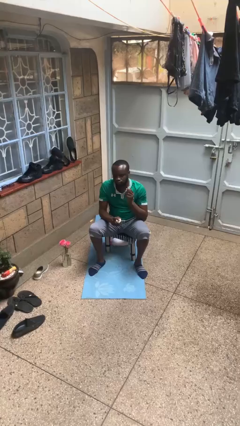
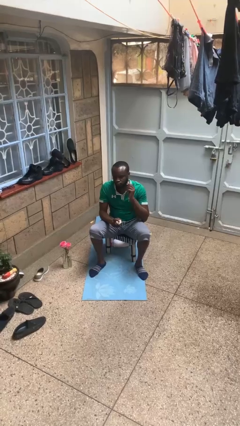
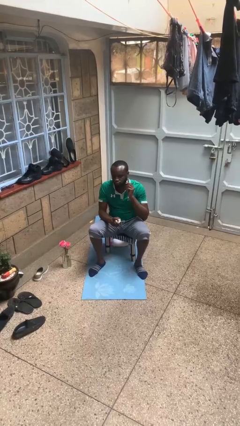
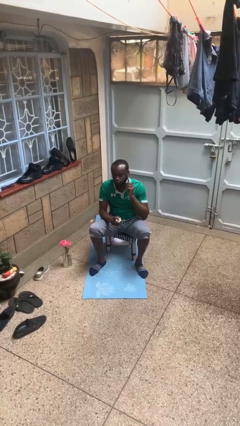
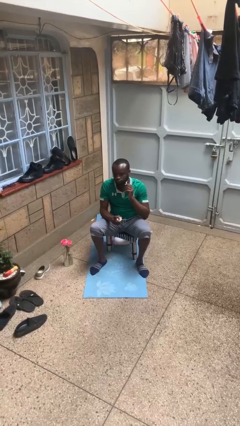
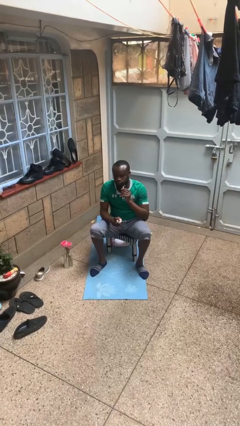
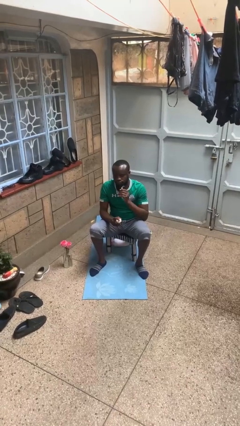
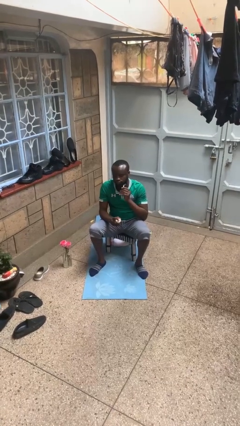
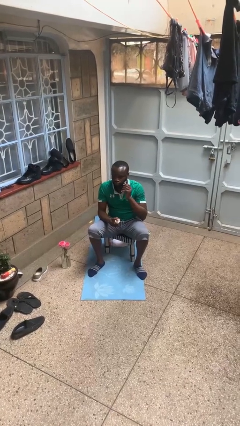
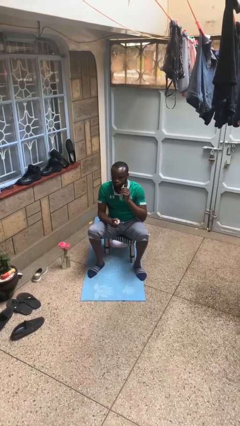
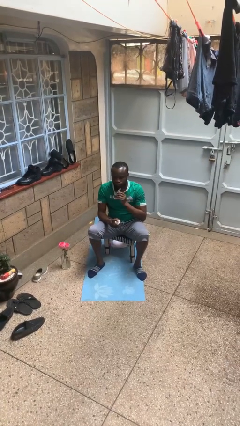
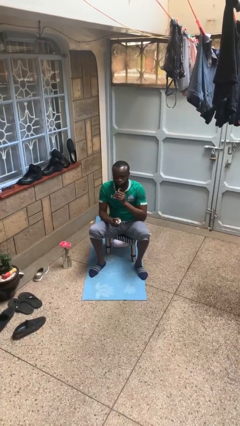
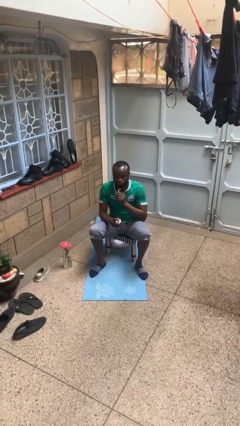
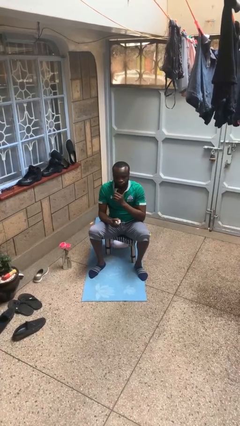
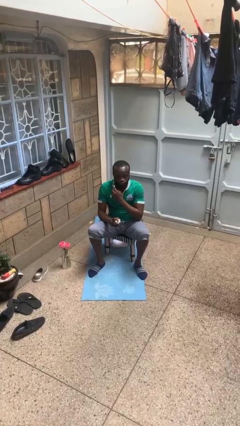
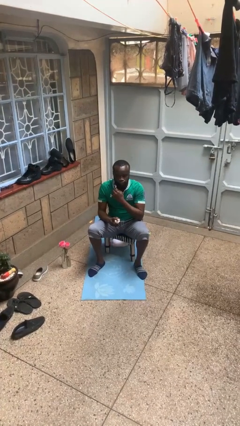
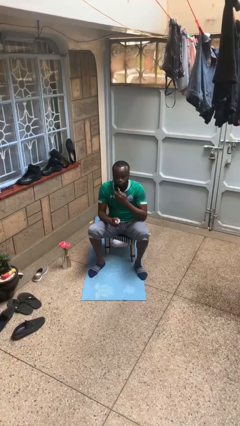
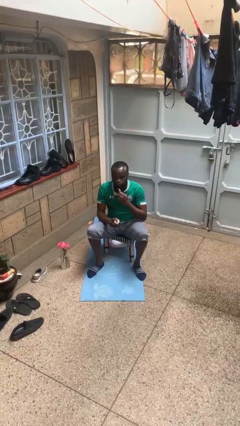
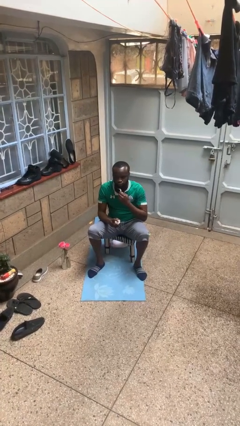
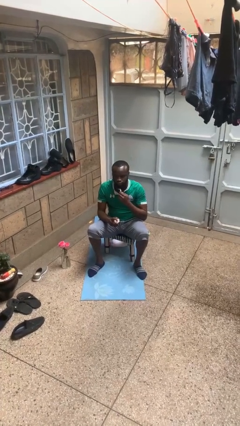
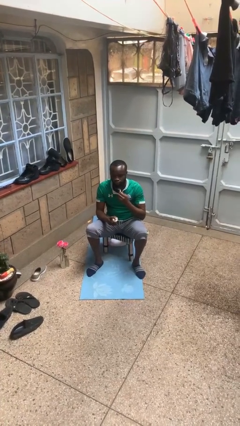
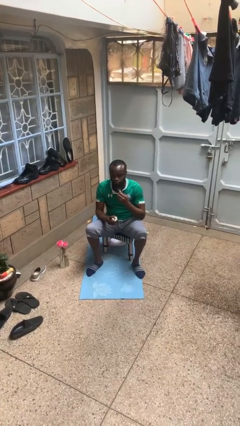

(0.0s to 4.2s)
person shaves face

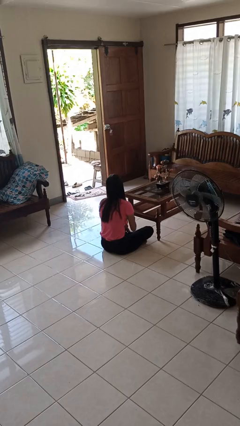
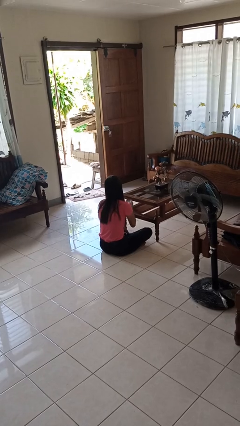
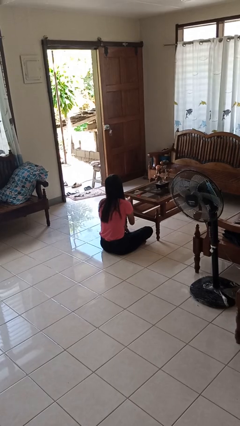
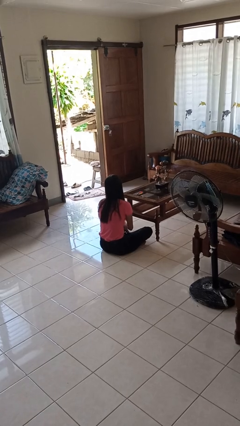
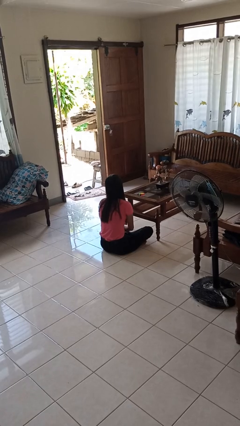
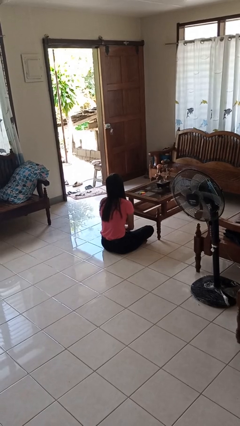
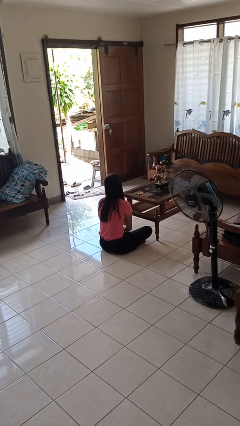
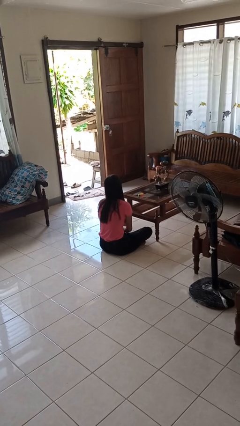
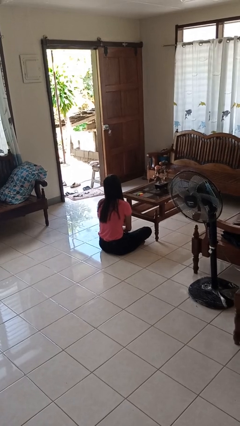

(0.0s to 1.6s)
person throws object on table

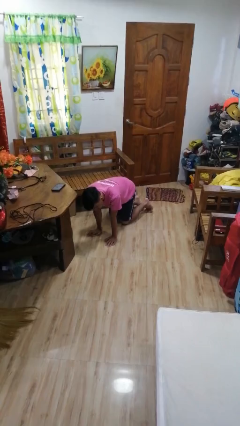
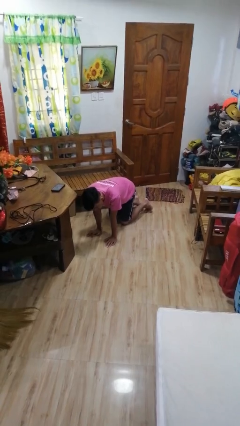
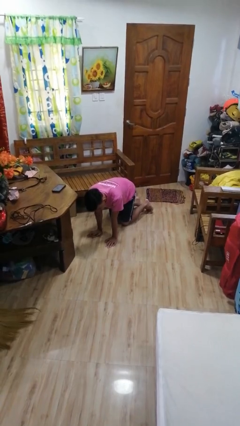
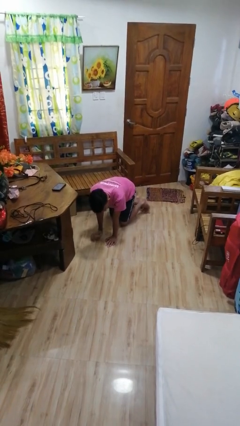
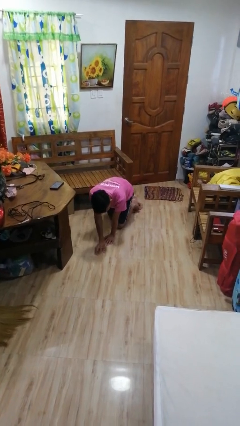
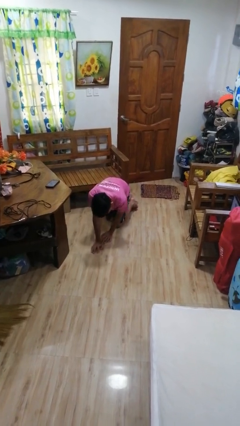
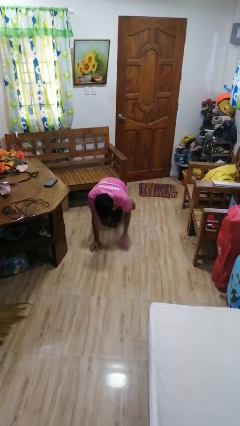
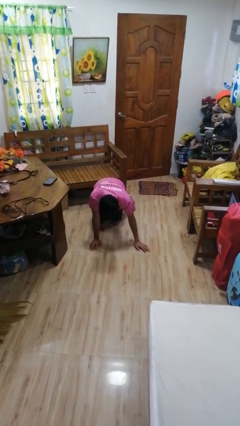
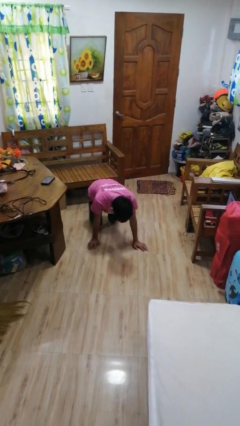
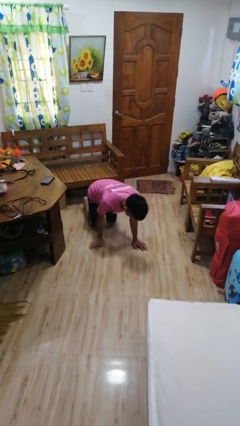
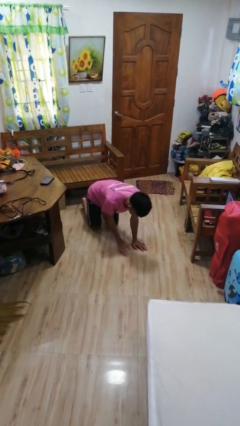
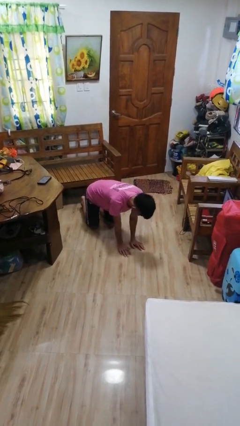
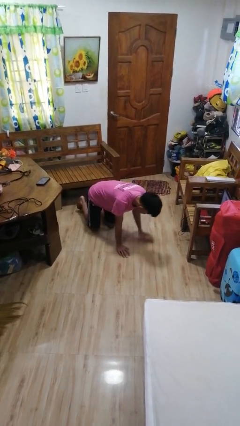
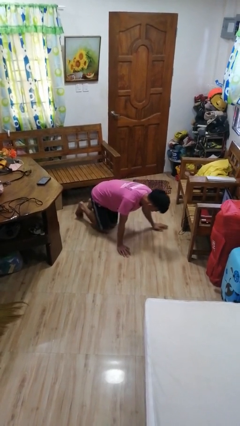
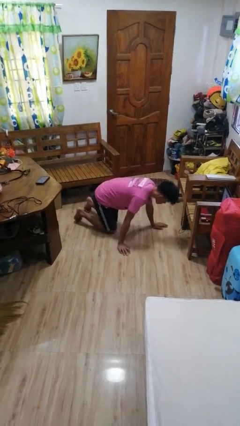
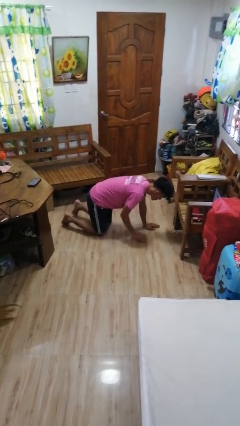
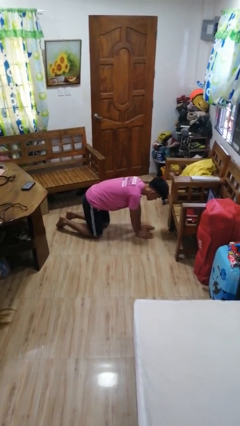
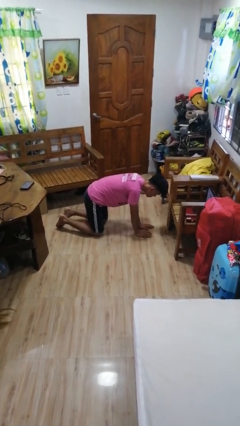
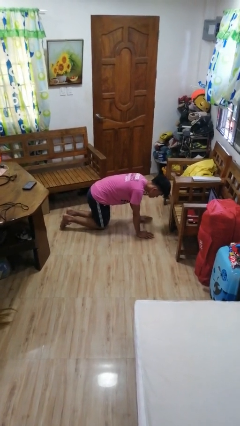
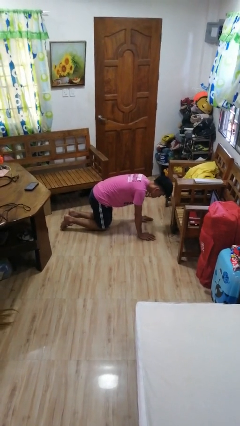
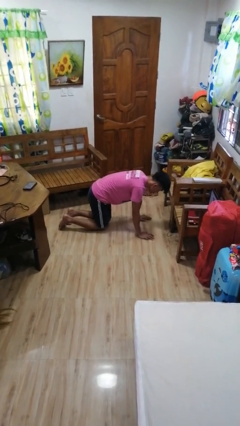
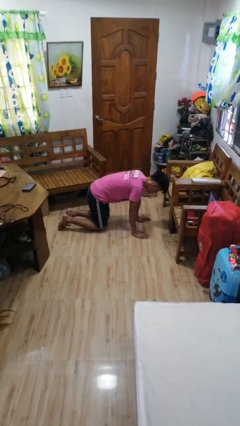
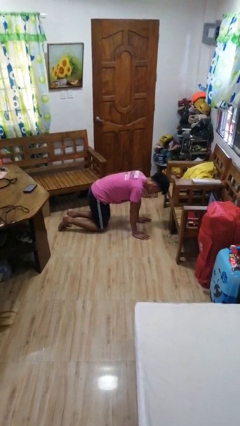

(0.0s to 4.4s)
person crawls

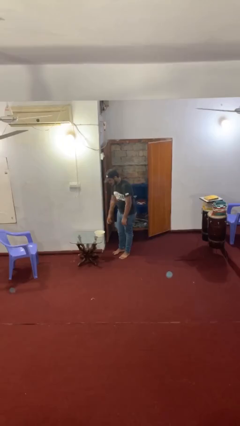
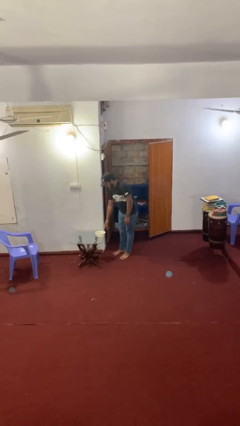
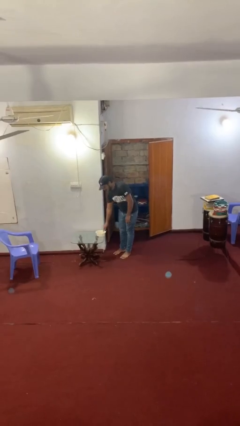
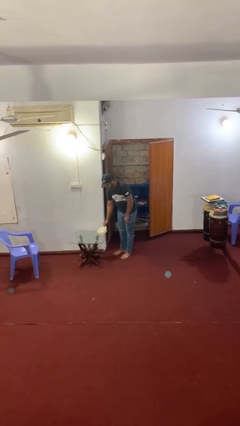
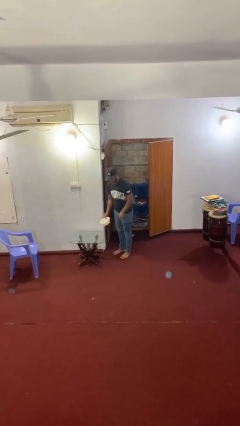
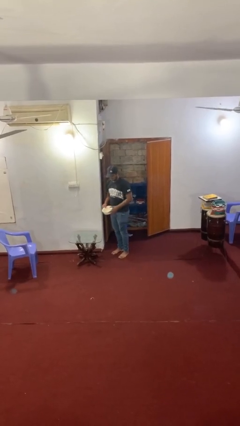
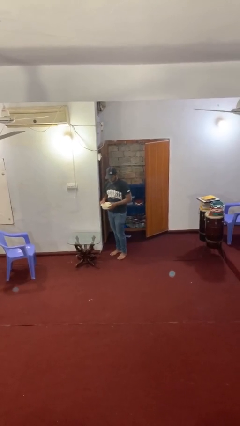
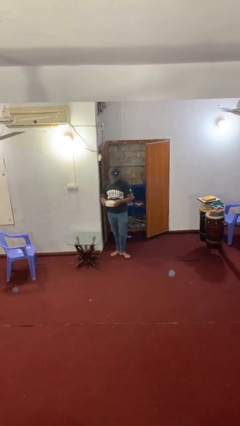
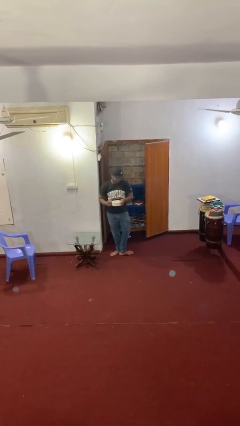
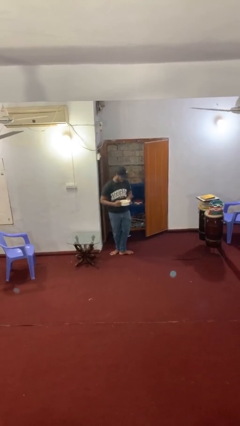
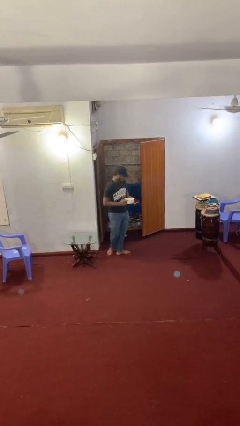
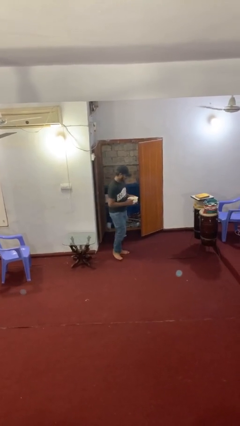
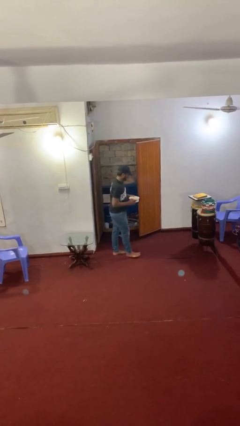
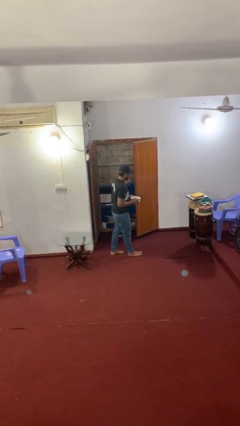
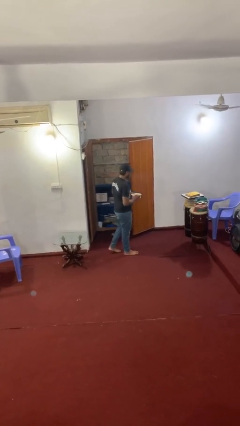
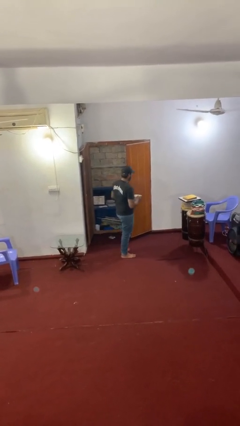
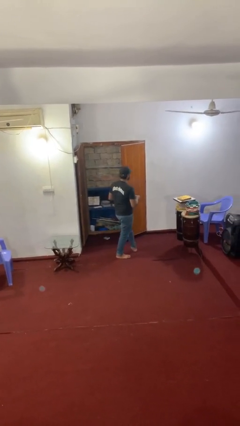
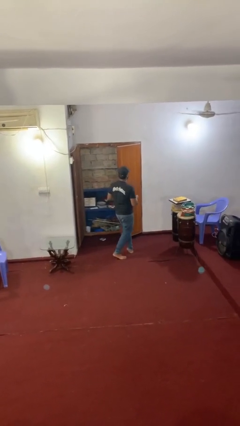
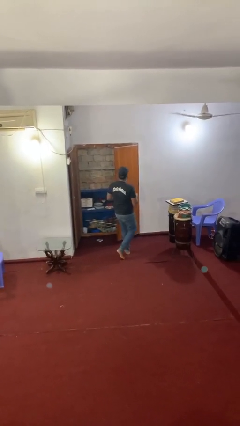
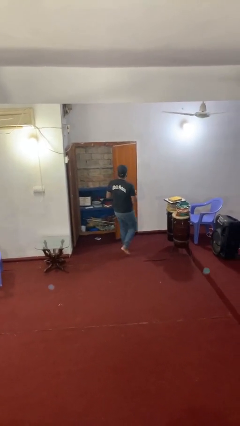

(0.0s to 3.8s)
person picks up object from table

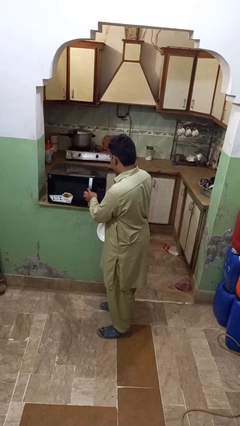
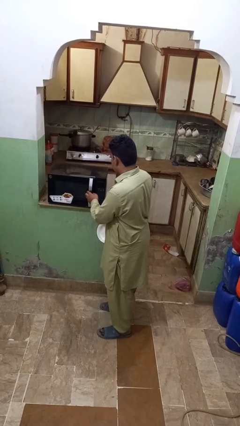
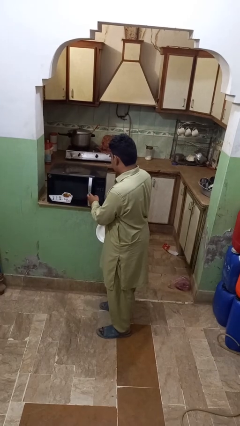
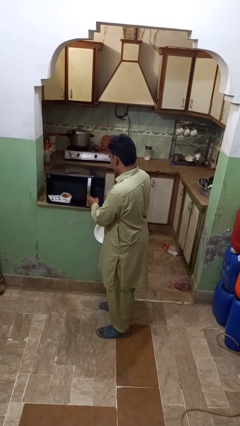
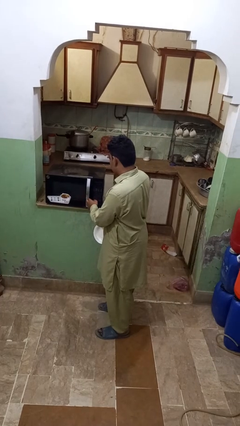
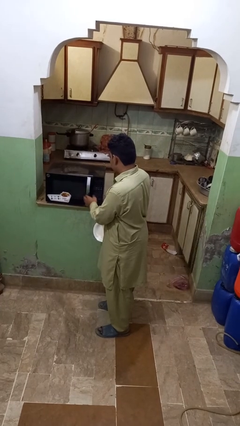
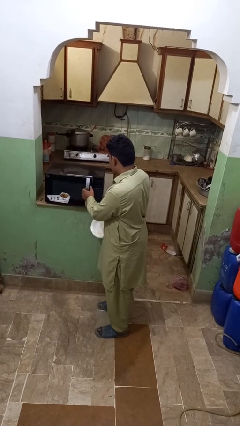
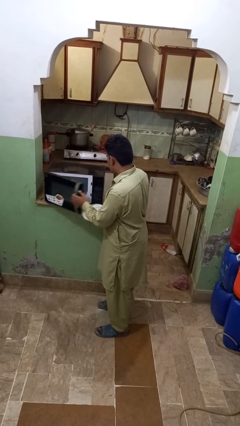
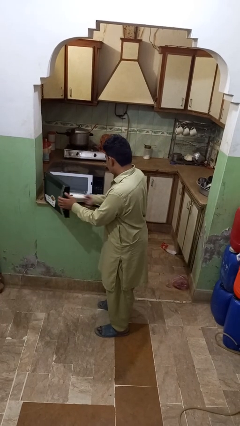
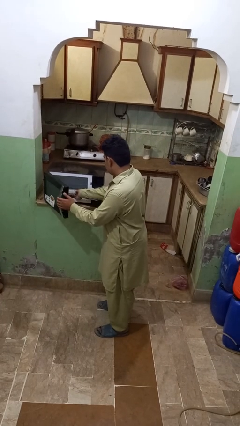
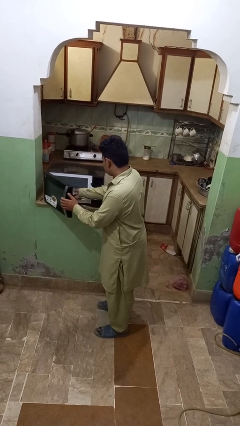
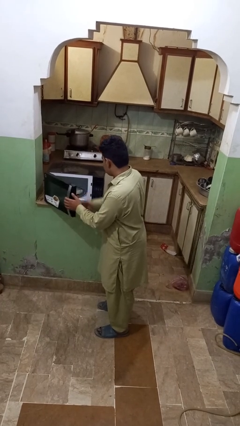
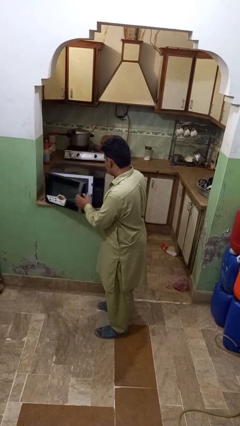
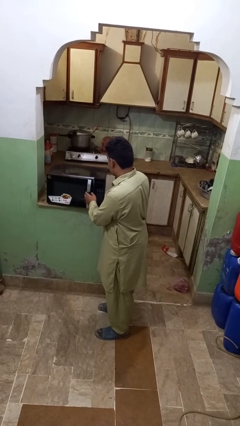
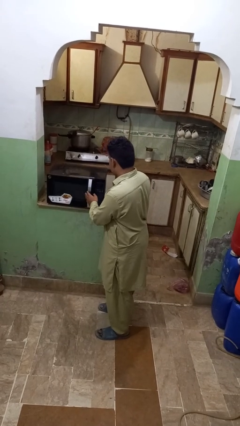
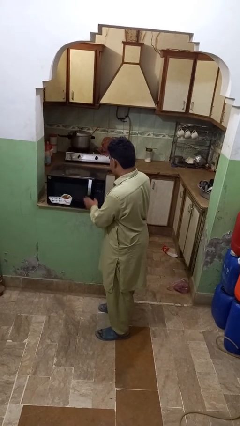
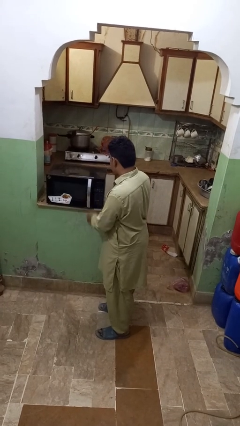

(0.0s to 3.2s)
person puts object into microwave

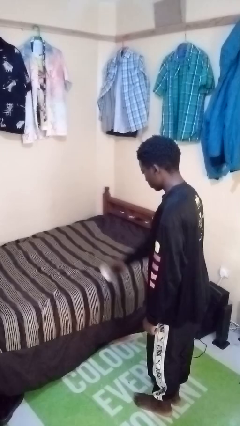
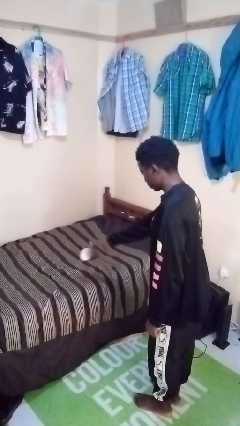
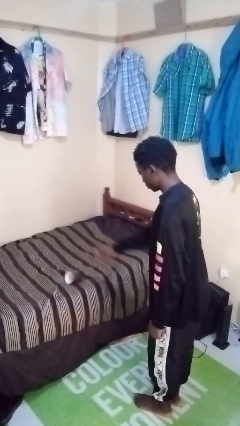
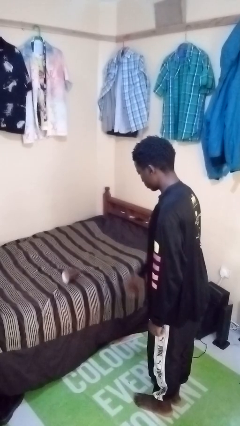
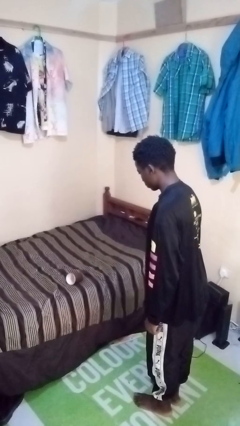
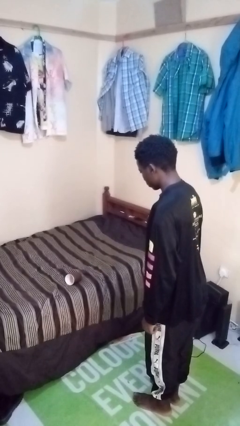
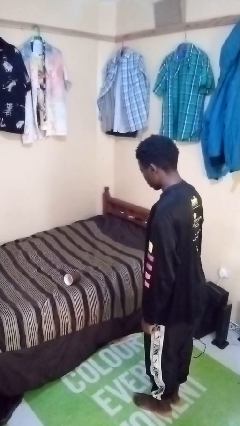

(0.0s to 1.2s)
person throws object on bed
